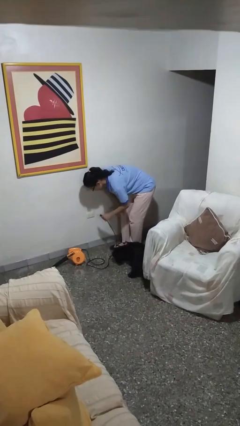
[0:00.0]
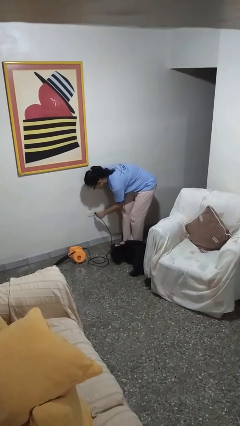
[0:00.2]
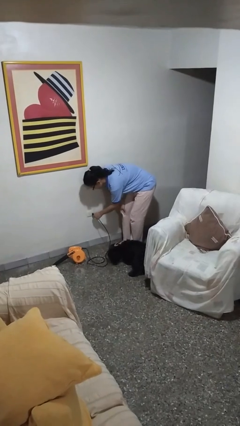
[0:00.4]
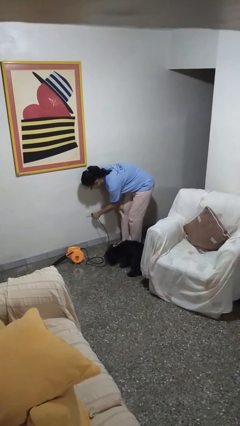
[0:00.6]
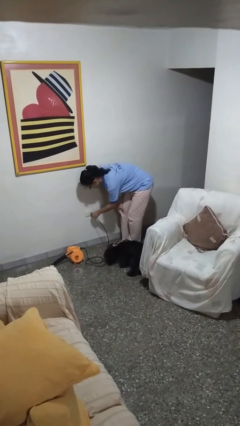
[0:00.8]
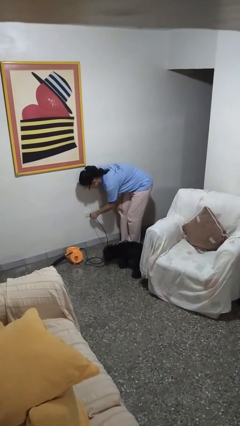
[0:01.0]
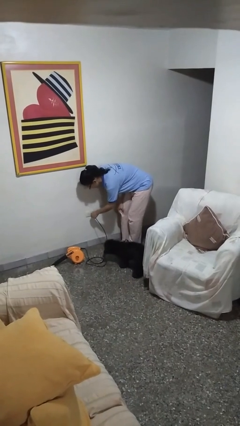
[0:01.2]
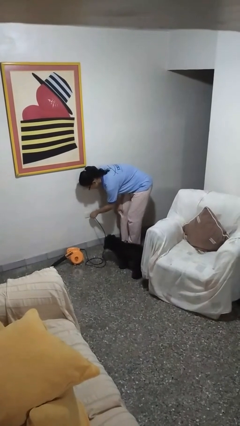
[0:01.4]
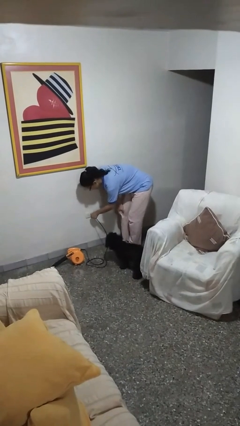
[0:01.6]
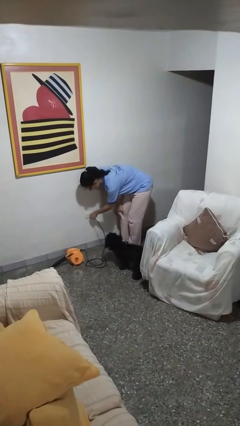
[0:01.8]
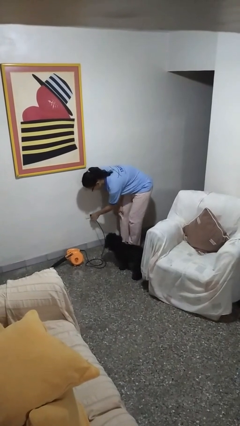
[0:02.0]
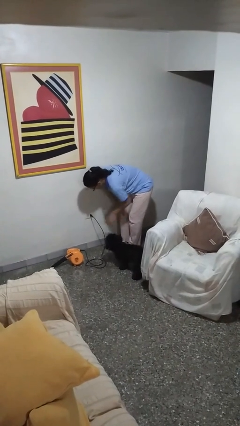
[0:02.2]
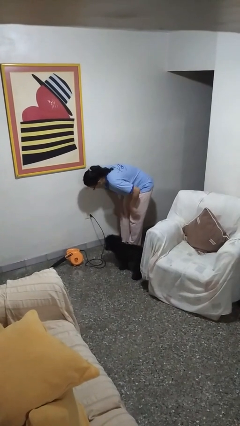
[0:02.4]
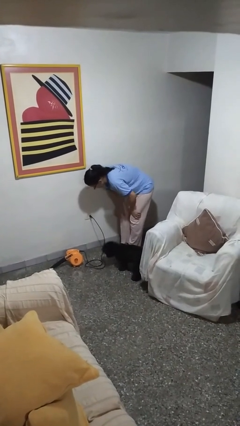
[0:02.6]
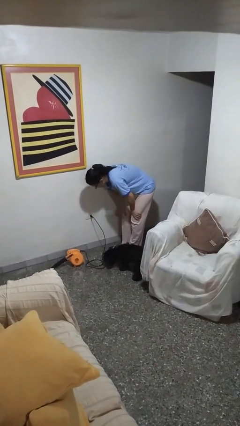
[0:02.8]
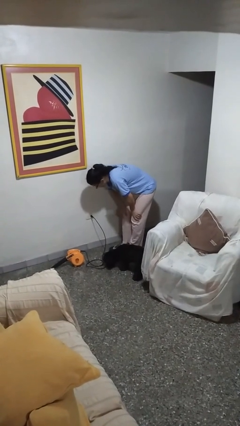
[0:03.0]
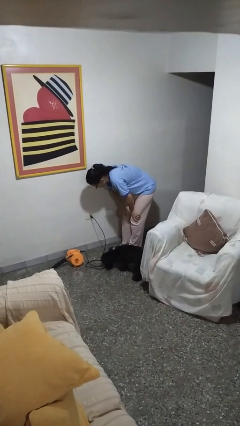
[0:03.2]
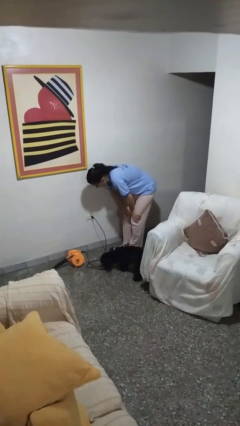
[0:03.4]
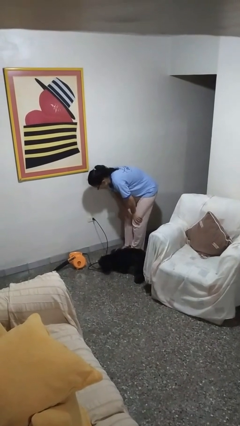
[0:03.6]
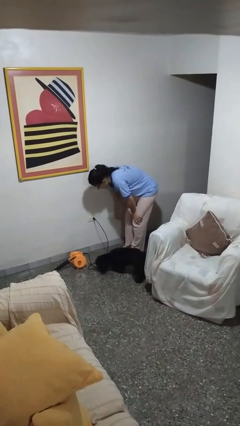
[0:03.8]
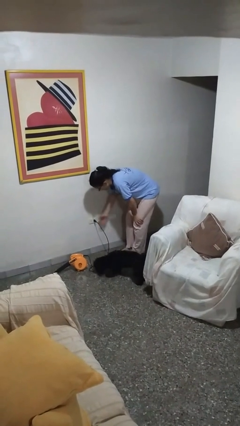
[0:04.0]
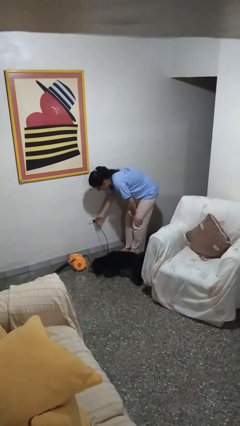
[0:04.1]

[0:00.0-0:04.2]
person plugs into electrical socket

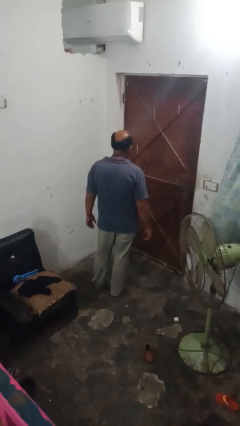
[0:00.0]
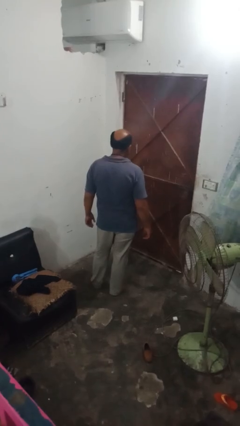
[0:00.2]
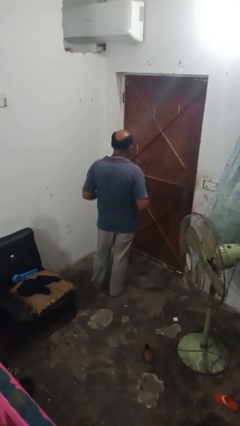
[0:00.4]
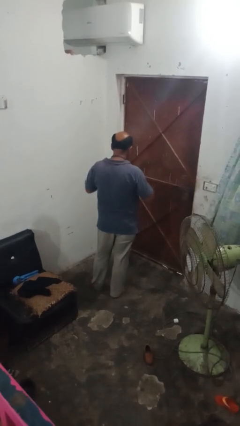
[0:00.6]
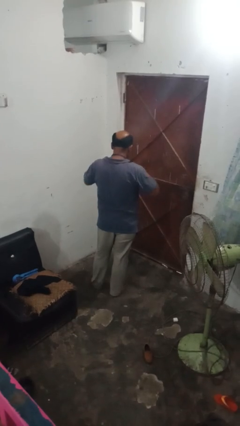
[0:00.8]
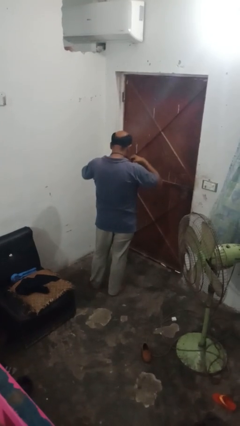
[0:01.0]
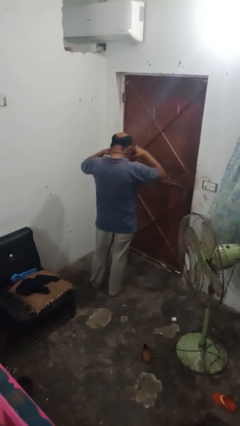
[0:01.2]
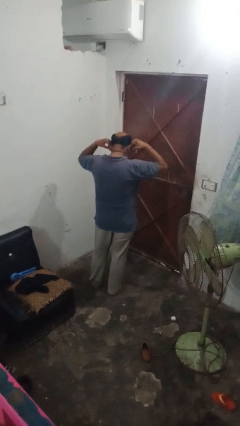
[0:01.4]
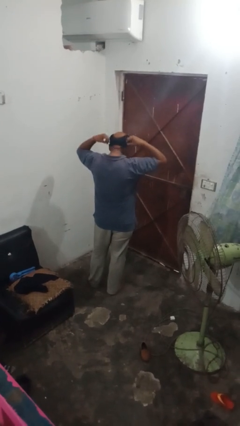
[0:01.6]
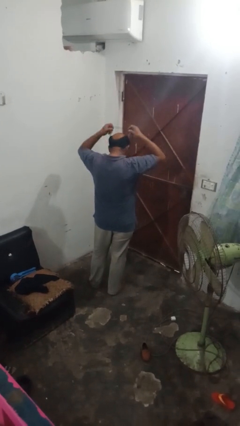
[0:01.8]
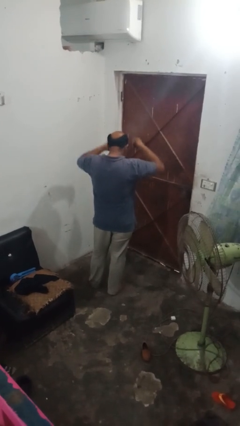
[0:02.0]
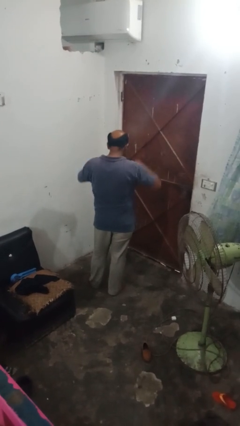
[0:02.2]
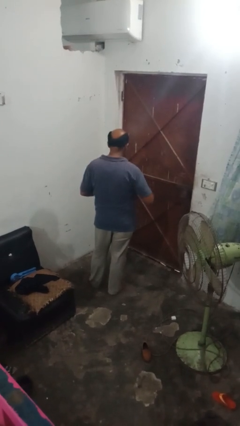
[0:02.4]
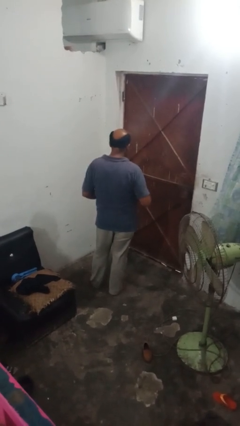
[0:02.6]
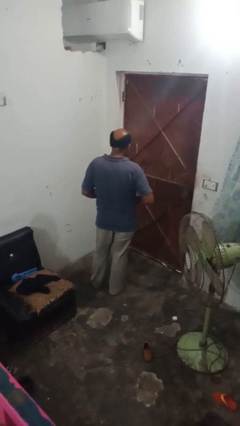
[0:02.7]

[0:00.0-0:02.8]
person takes off necklace

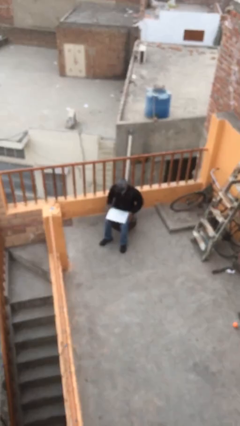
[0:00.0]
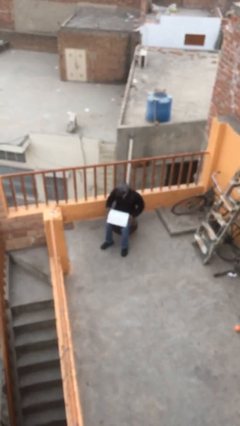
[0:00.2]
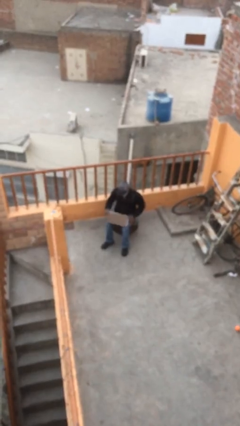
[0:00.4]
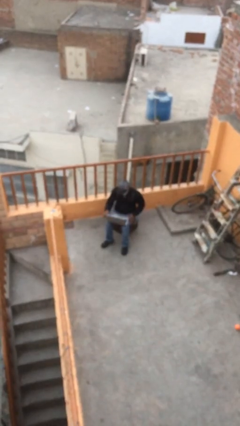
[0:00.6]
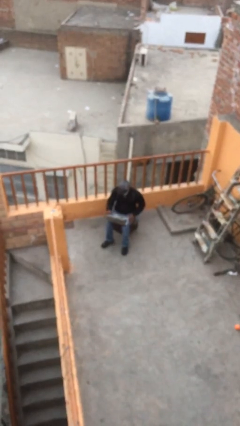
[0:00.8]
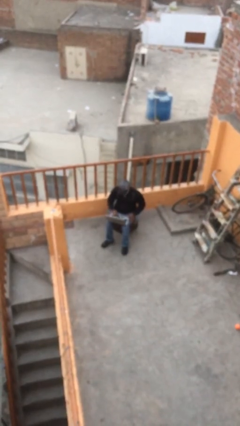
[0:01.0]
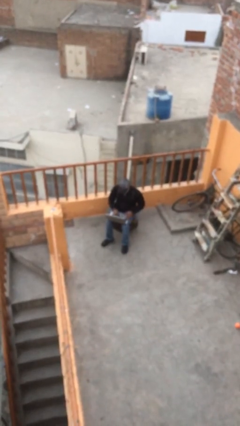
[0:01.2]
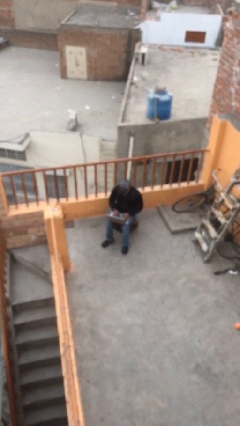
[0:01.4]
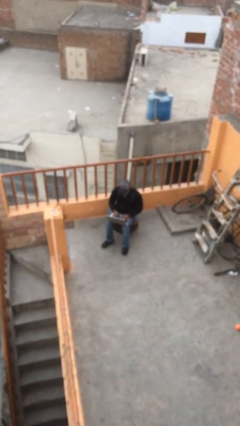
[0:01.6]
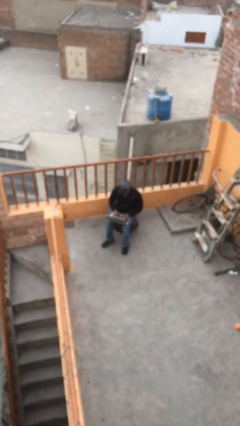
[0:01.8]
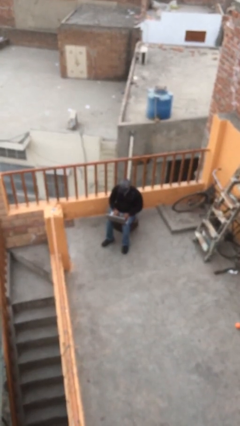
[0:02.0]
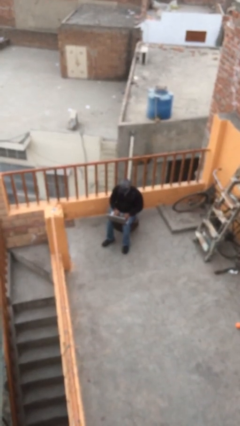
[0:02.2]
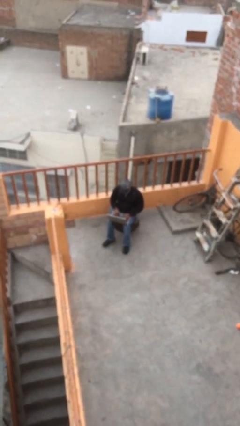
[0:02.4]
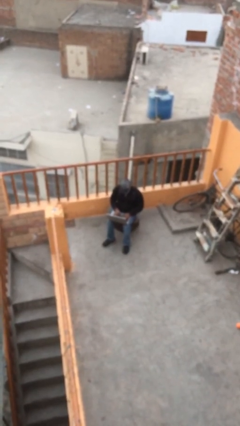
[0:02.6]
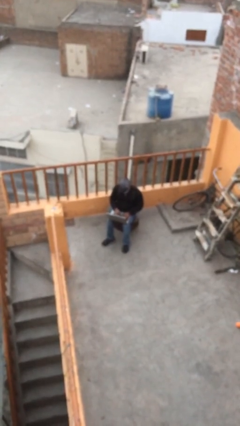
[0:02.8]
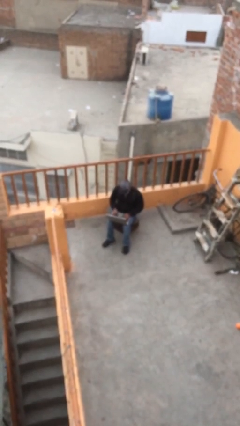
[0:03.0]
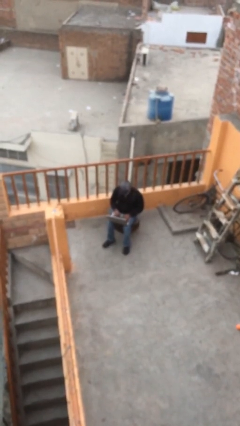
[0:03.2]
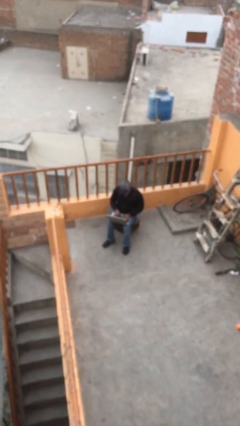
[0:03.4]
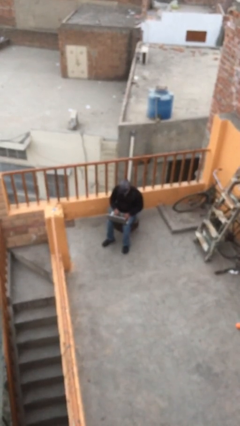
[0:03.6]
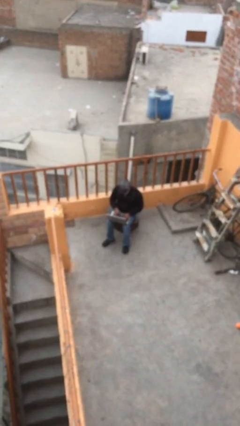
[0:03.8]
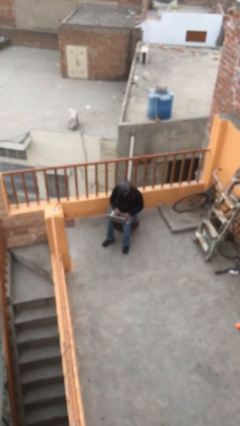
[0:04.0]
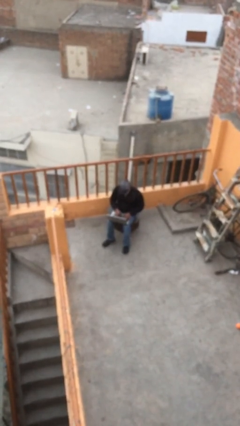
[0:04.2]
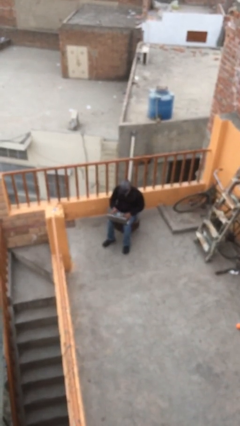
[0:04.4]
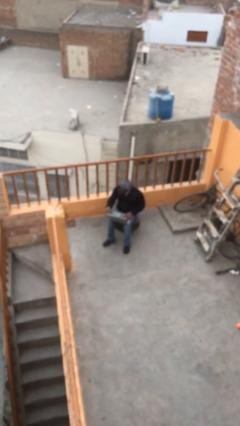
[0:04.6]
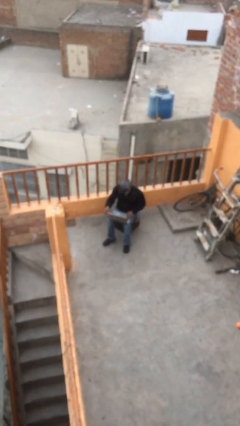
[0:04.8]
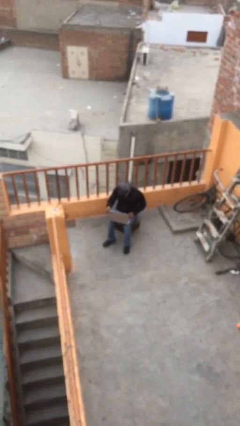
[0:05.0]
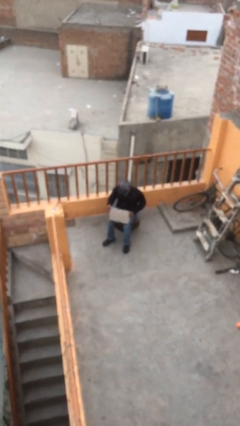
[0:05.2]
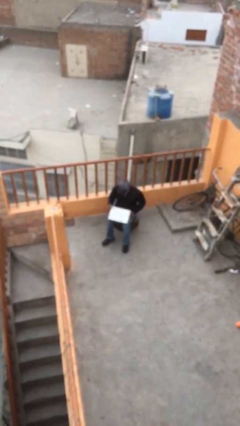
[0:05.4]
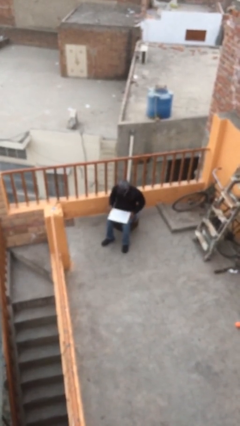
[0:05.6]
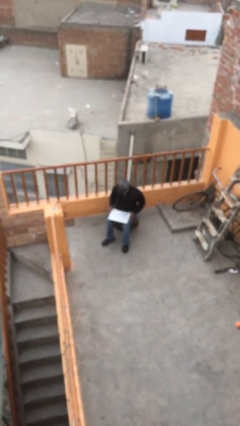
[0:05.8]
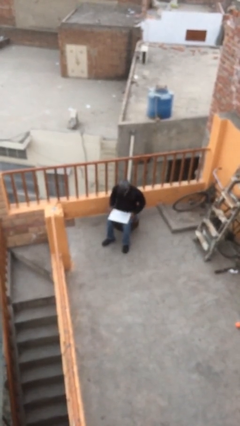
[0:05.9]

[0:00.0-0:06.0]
person interacts with laptop

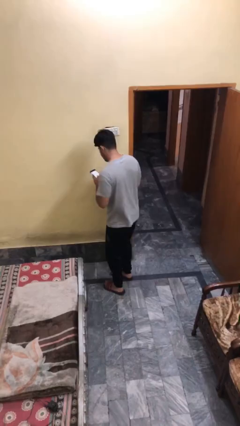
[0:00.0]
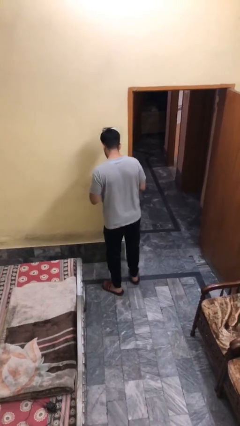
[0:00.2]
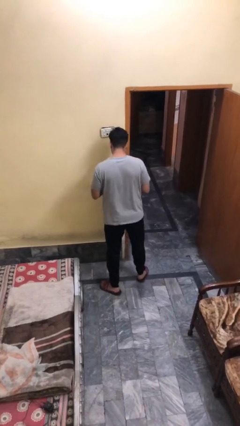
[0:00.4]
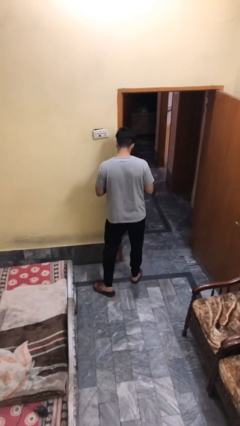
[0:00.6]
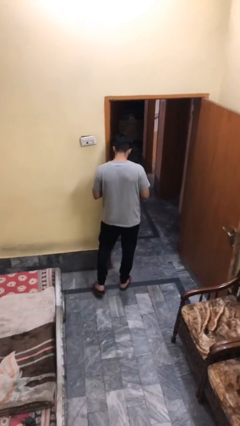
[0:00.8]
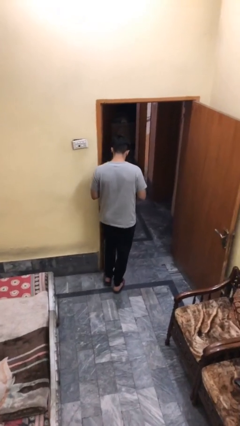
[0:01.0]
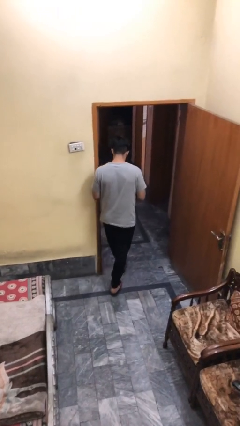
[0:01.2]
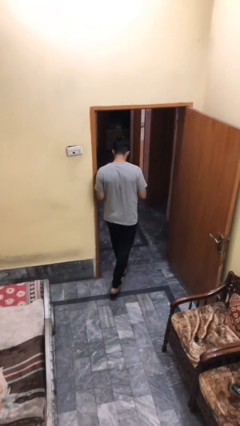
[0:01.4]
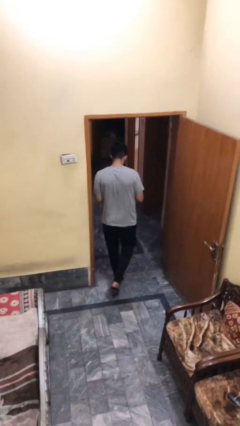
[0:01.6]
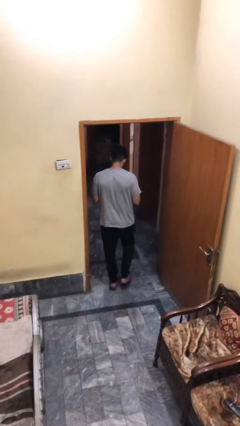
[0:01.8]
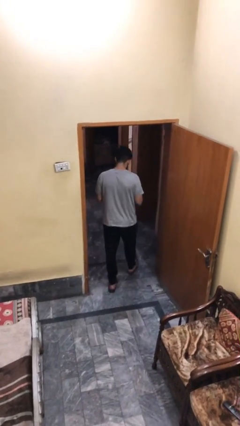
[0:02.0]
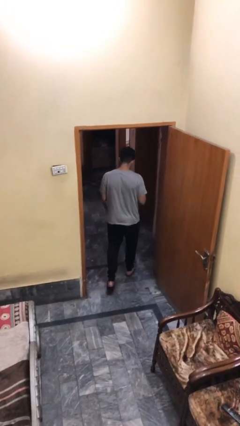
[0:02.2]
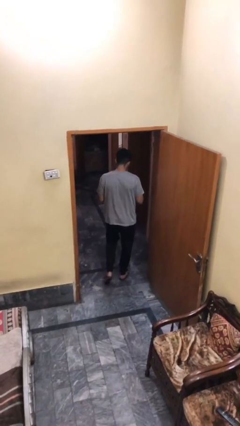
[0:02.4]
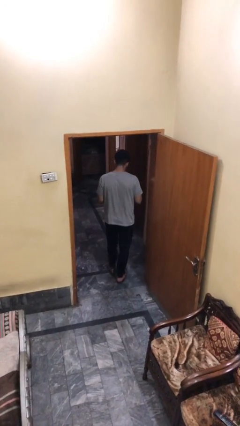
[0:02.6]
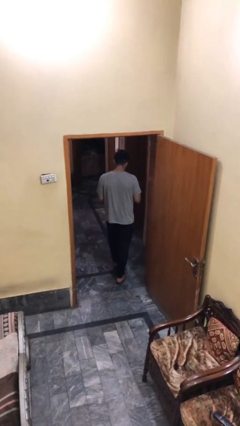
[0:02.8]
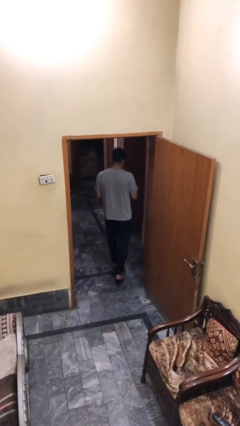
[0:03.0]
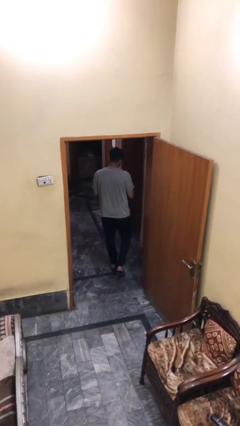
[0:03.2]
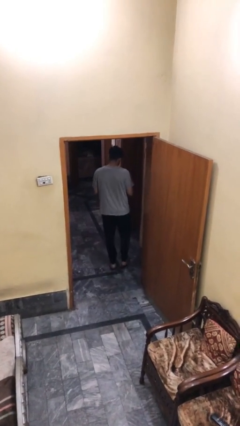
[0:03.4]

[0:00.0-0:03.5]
person exits scene through structure

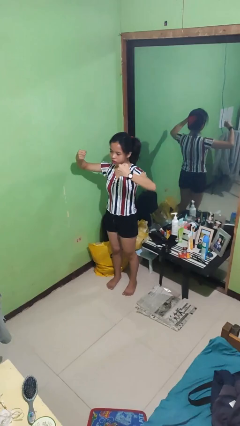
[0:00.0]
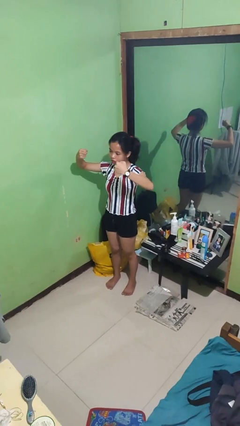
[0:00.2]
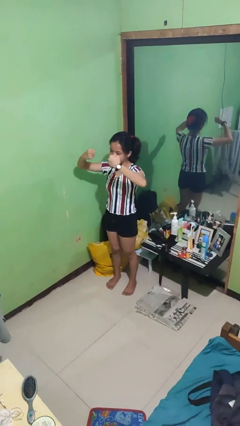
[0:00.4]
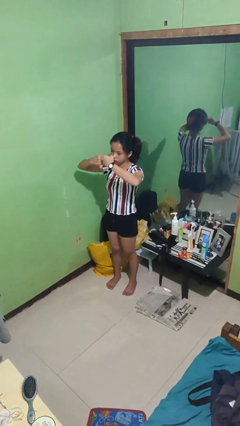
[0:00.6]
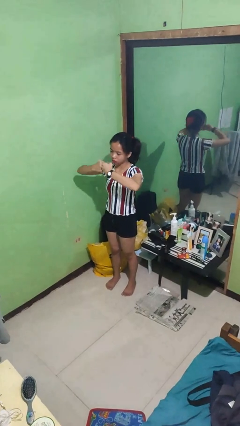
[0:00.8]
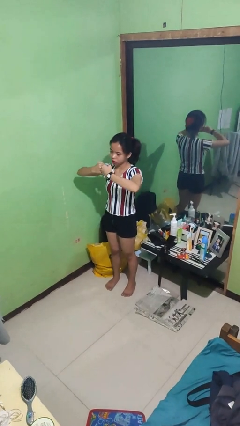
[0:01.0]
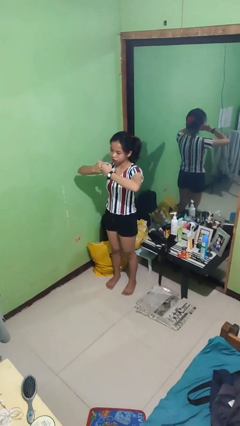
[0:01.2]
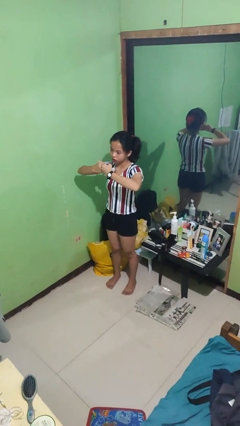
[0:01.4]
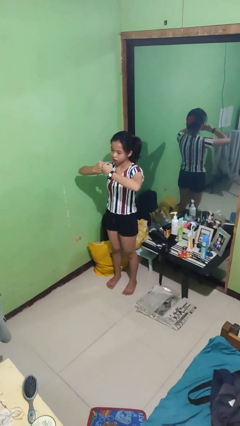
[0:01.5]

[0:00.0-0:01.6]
person gestures zoom out
